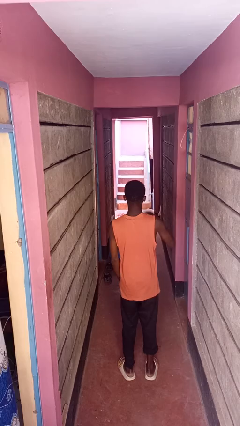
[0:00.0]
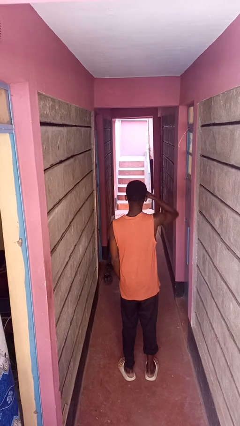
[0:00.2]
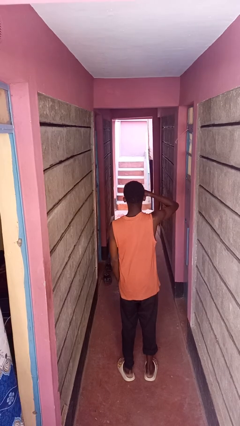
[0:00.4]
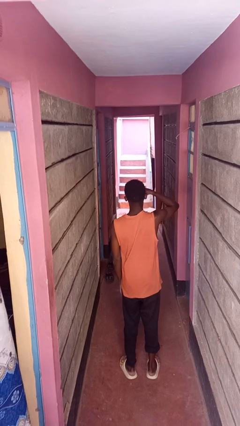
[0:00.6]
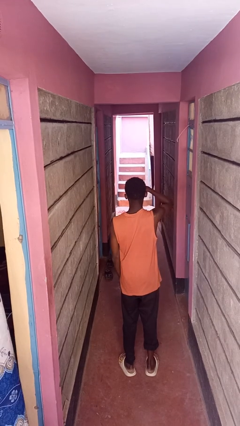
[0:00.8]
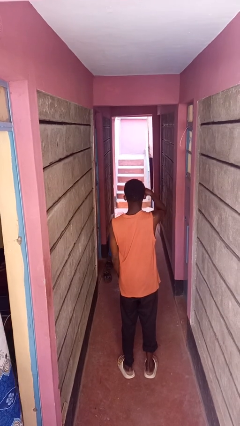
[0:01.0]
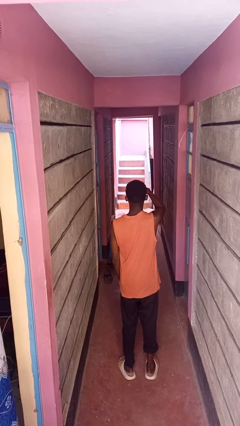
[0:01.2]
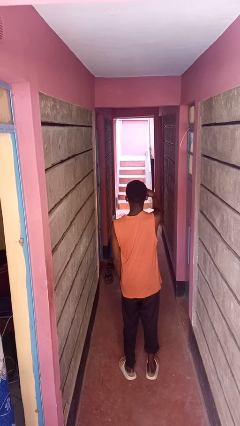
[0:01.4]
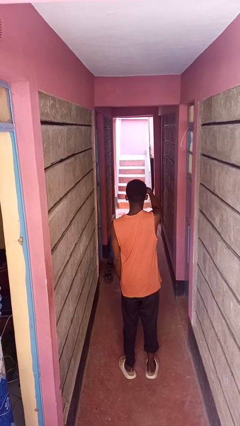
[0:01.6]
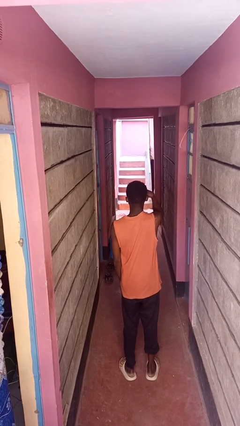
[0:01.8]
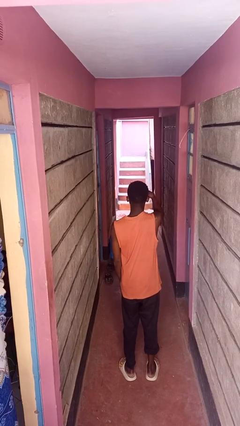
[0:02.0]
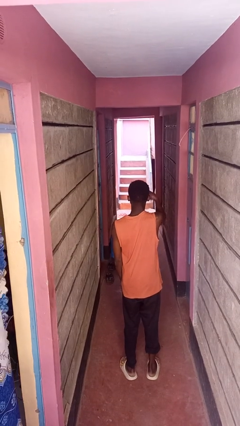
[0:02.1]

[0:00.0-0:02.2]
person rubs eyes

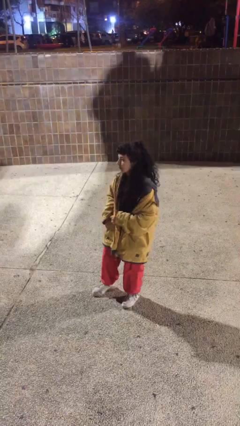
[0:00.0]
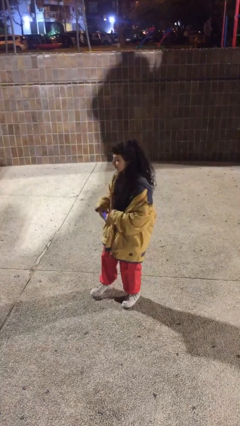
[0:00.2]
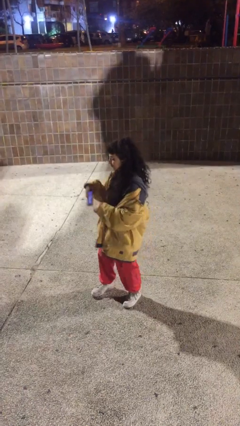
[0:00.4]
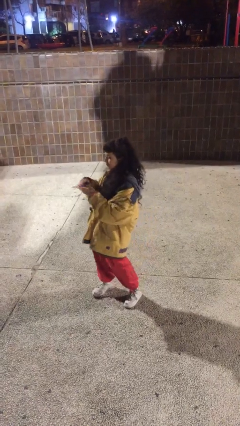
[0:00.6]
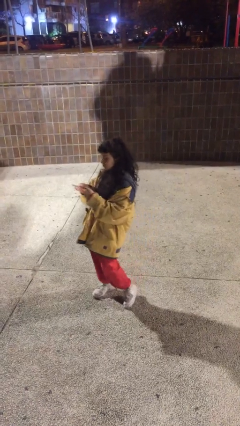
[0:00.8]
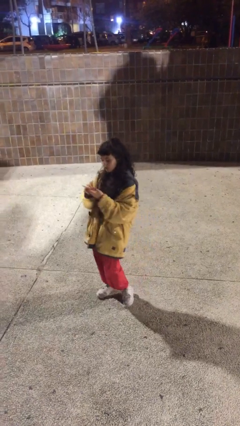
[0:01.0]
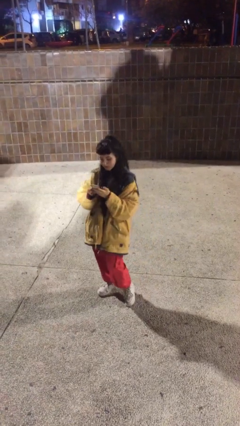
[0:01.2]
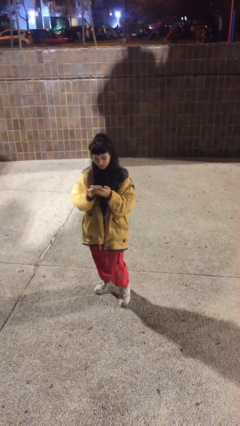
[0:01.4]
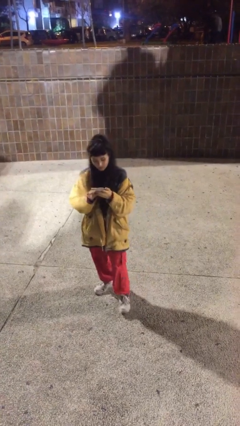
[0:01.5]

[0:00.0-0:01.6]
person takes phone from pocket

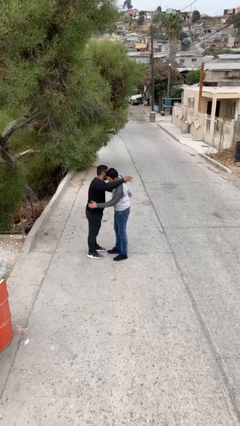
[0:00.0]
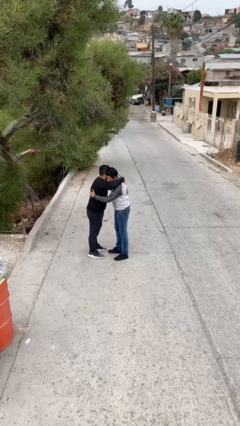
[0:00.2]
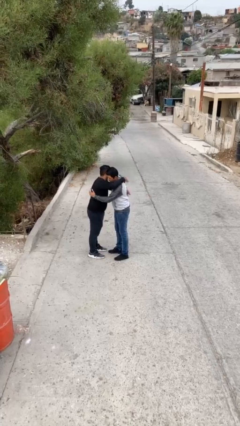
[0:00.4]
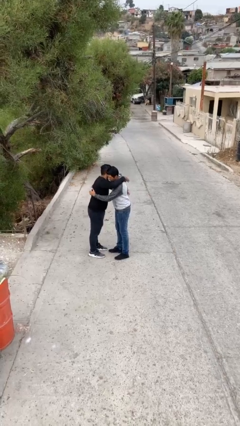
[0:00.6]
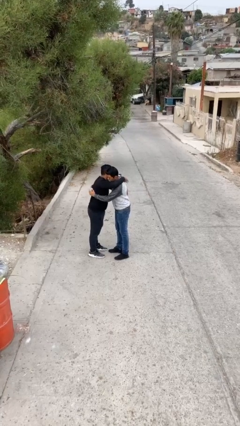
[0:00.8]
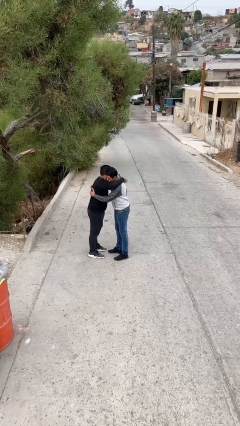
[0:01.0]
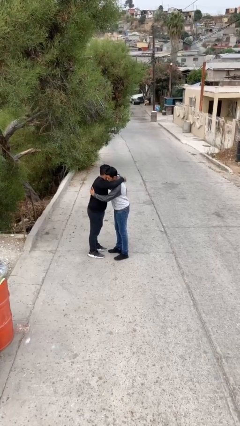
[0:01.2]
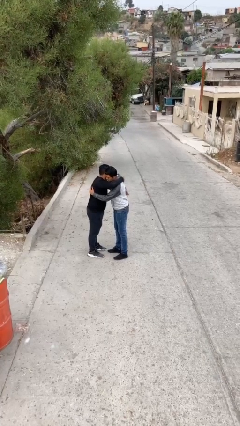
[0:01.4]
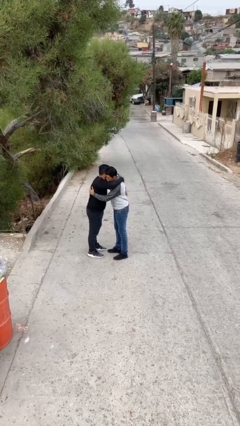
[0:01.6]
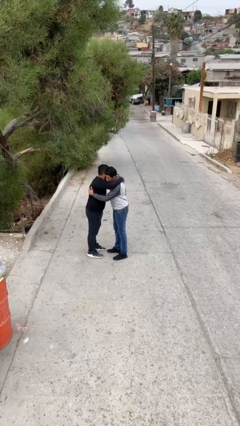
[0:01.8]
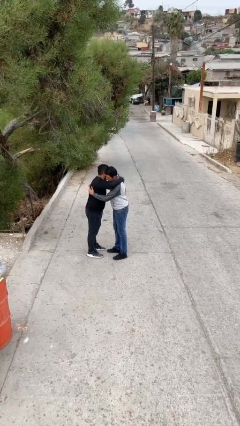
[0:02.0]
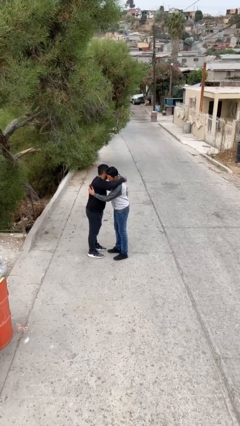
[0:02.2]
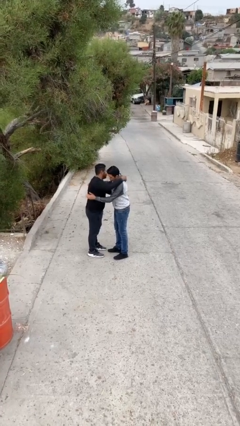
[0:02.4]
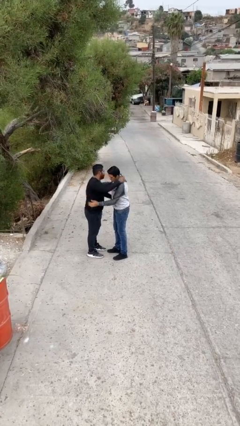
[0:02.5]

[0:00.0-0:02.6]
person embraces person

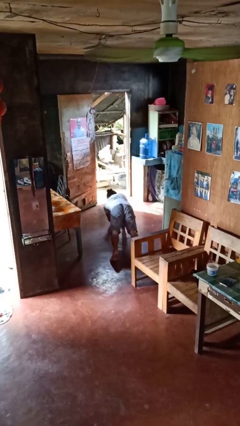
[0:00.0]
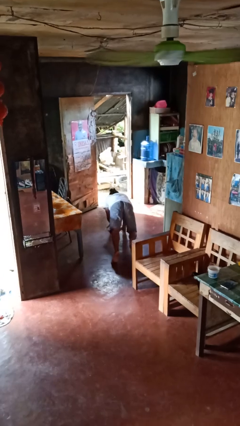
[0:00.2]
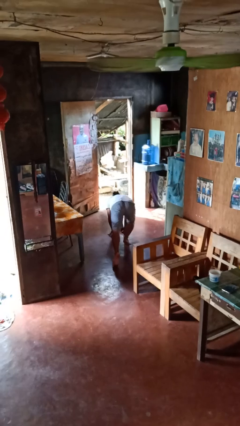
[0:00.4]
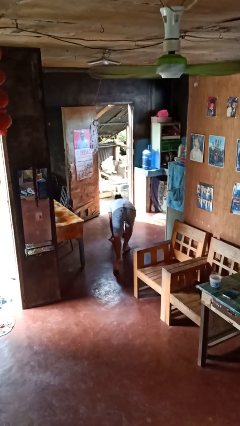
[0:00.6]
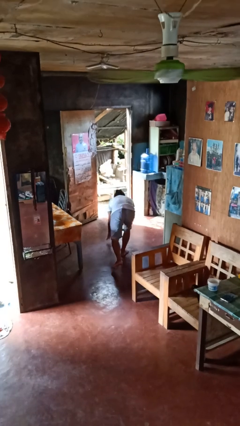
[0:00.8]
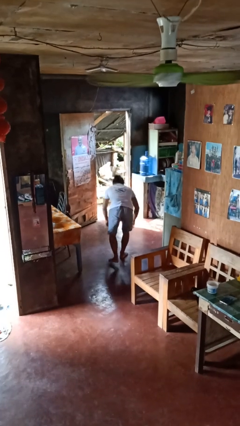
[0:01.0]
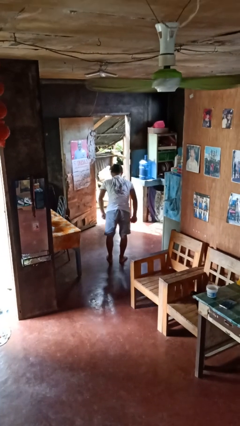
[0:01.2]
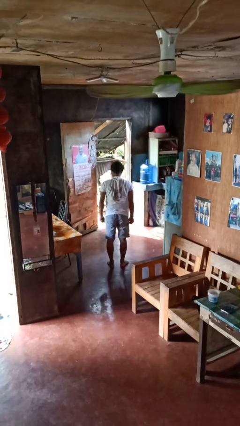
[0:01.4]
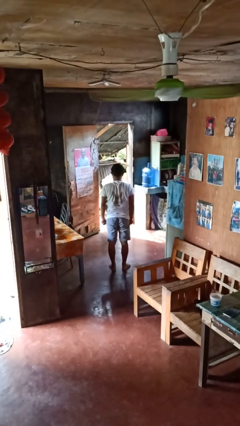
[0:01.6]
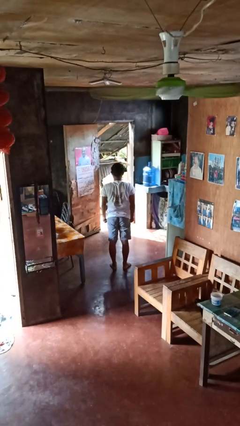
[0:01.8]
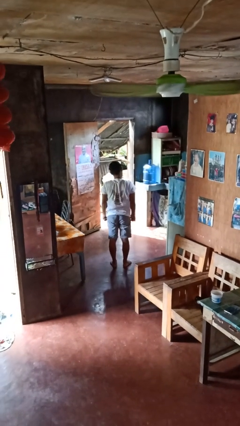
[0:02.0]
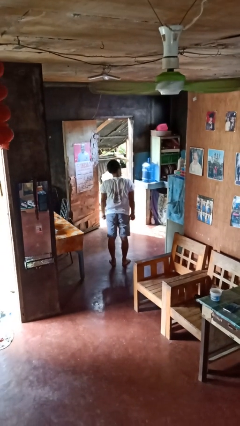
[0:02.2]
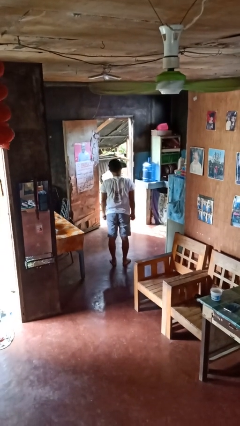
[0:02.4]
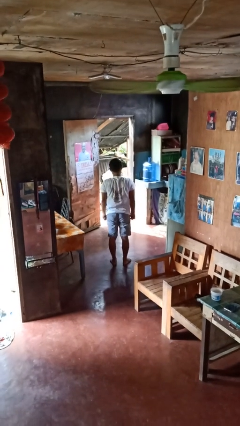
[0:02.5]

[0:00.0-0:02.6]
person stands up from floor

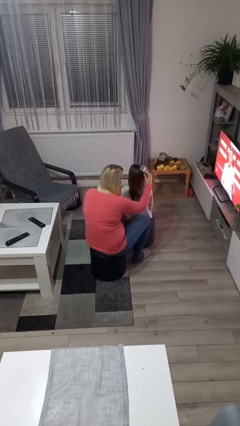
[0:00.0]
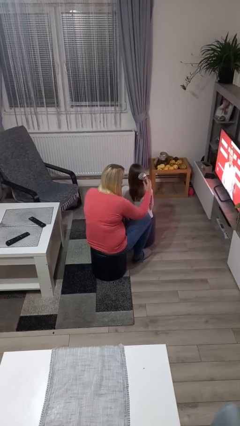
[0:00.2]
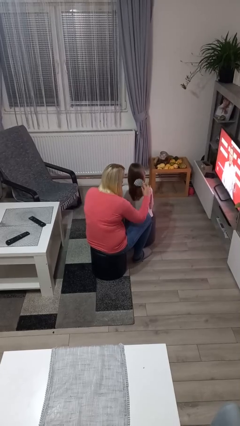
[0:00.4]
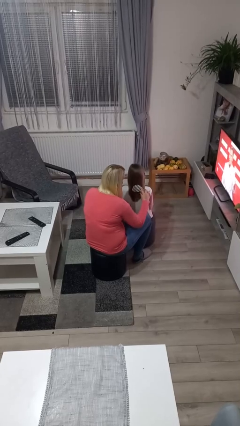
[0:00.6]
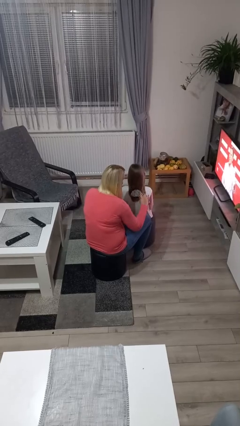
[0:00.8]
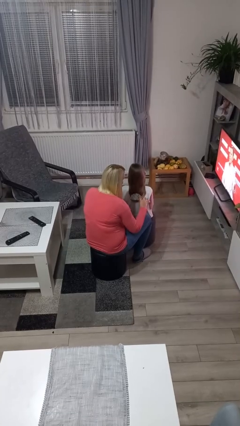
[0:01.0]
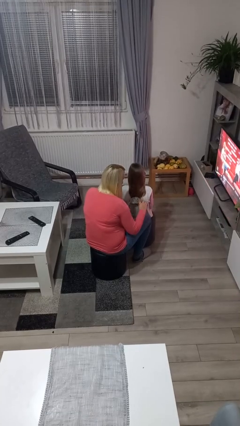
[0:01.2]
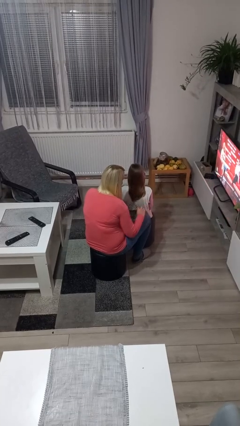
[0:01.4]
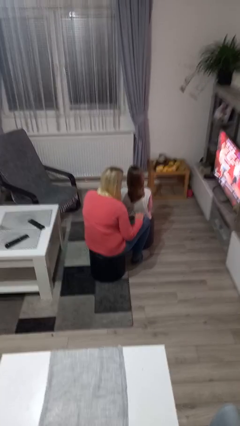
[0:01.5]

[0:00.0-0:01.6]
person brushes hair of person

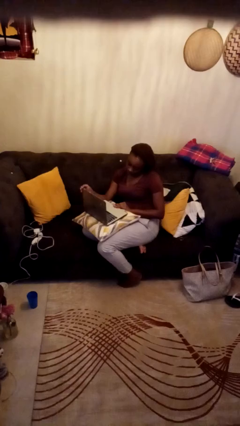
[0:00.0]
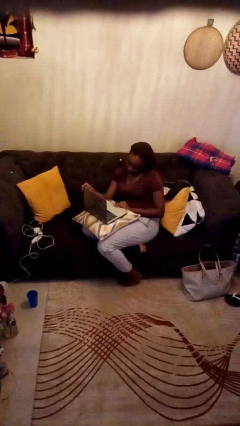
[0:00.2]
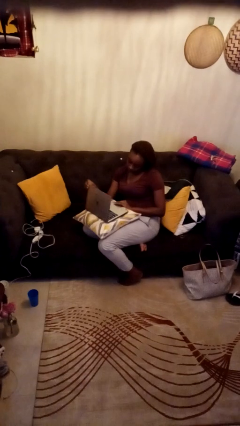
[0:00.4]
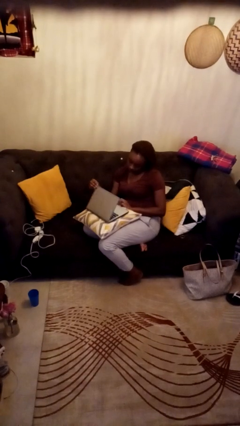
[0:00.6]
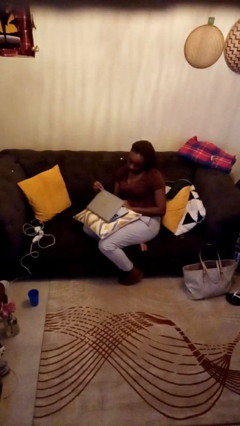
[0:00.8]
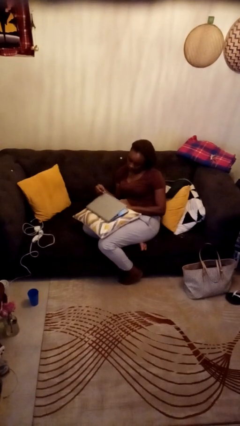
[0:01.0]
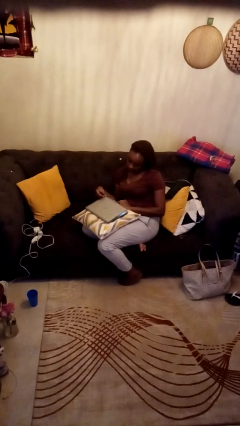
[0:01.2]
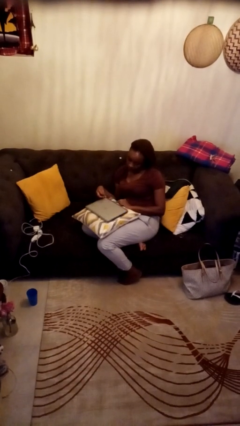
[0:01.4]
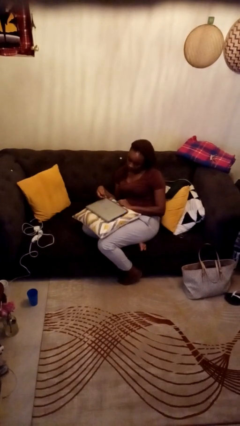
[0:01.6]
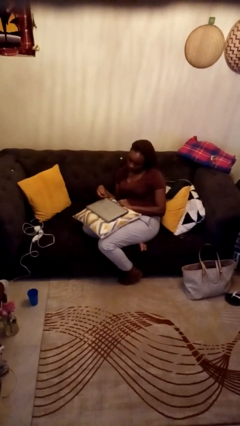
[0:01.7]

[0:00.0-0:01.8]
person closes laptop

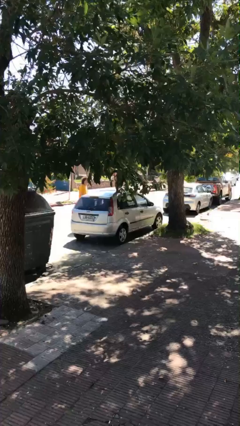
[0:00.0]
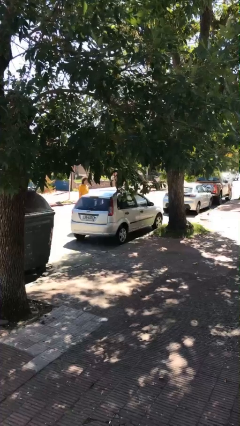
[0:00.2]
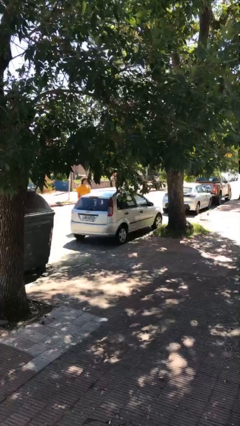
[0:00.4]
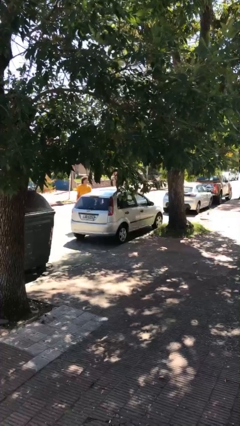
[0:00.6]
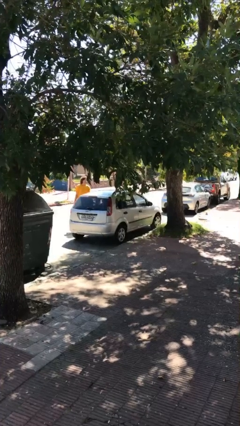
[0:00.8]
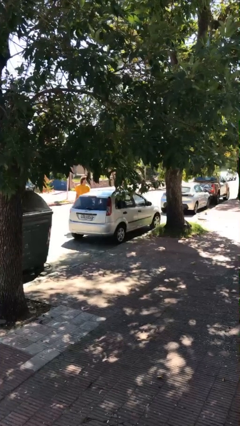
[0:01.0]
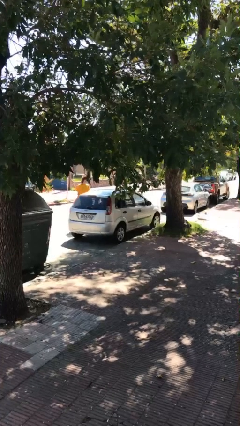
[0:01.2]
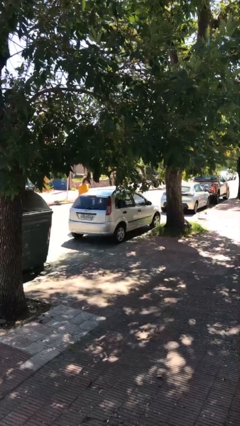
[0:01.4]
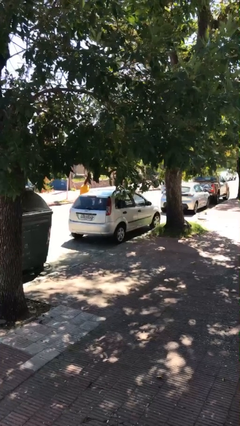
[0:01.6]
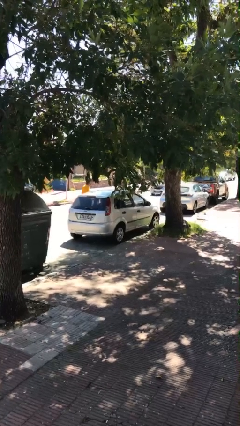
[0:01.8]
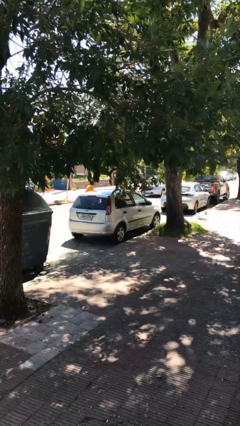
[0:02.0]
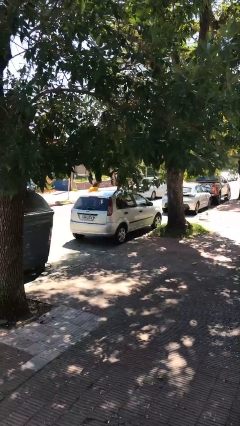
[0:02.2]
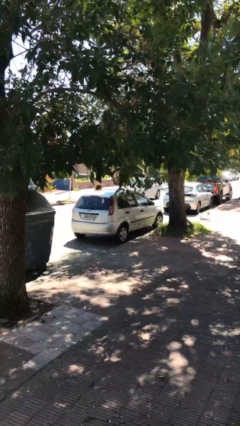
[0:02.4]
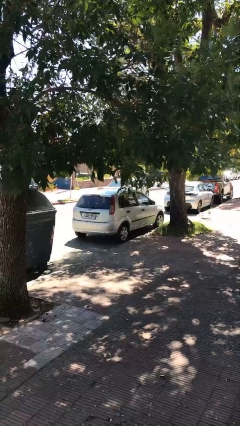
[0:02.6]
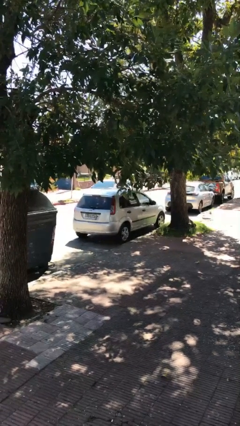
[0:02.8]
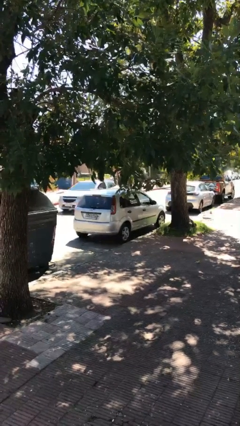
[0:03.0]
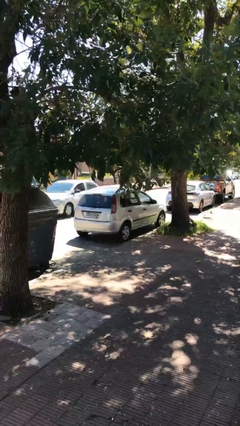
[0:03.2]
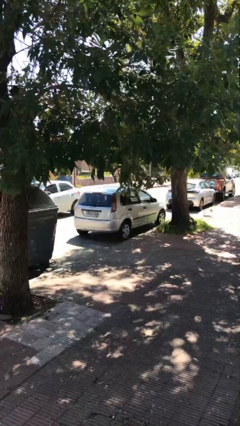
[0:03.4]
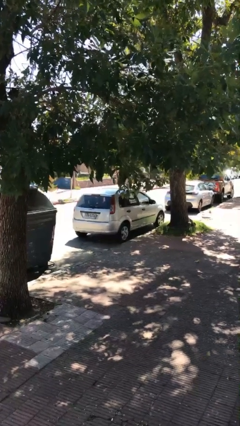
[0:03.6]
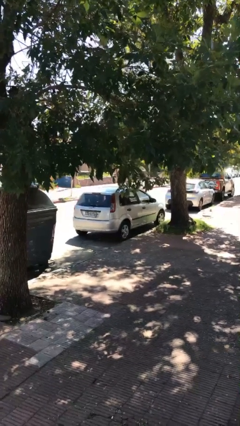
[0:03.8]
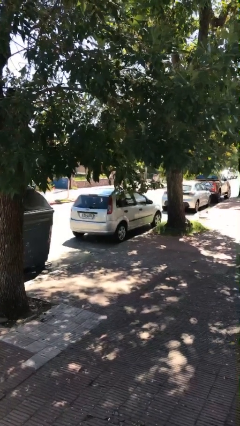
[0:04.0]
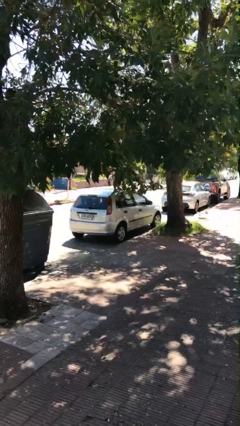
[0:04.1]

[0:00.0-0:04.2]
car picks up person

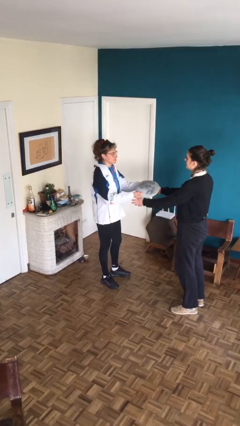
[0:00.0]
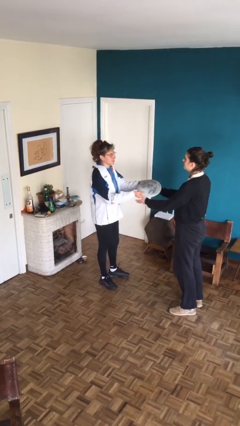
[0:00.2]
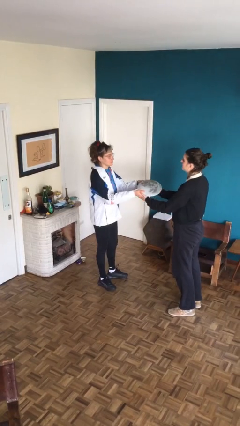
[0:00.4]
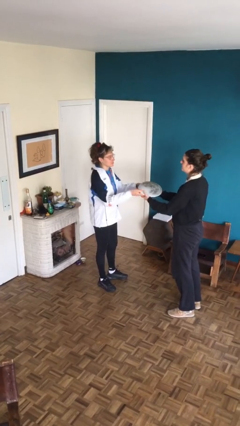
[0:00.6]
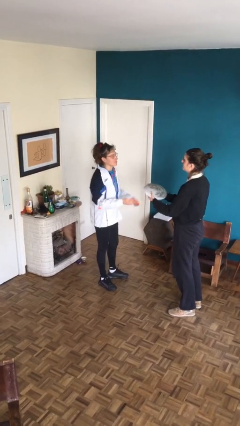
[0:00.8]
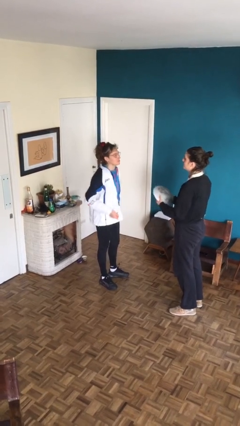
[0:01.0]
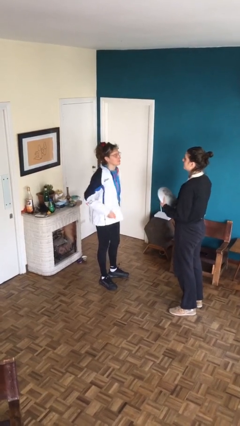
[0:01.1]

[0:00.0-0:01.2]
person transfers object to person
